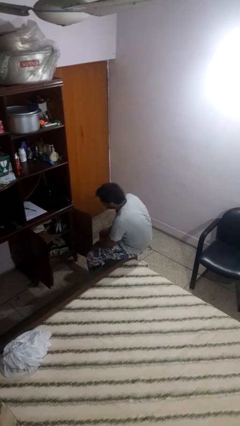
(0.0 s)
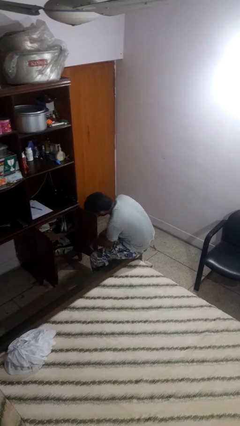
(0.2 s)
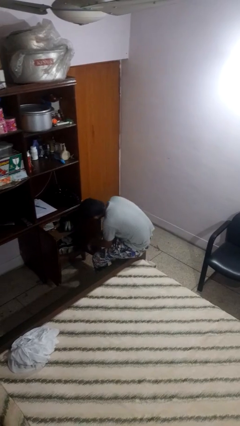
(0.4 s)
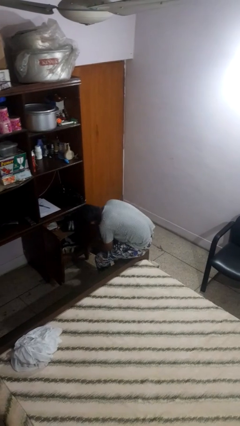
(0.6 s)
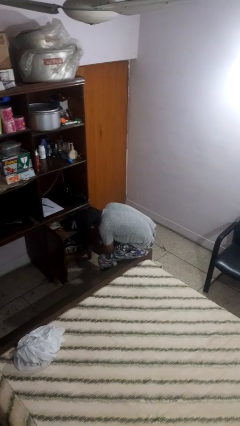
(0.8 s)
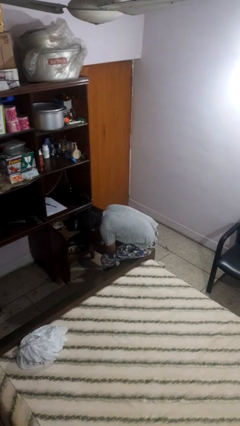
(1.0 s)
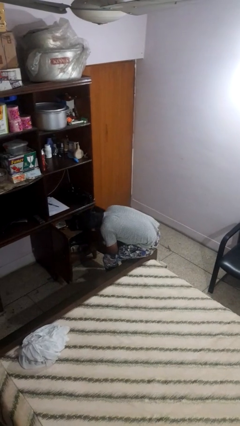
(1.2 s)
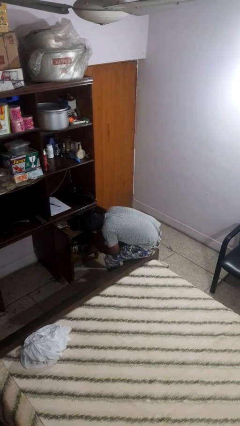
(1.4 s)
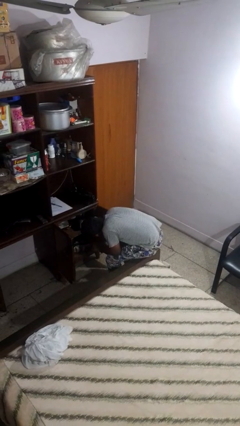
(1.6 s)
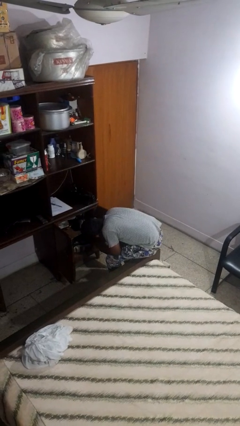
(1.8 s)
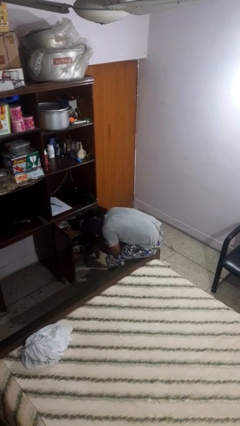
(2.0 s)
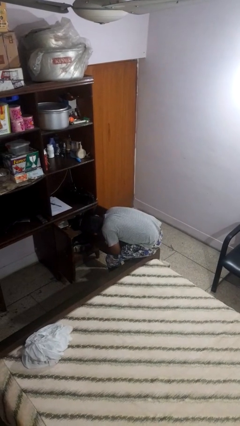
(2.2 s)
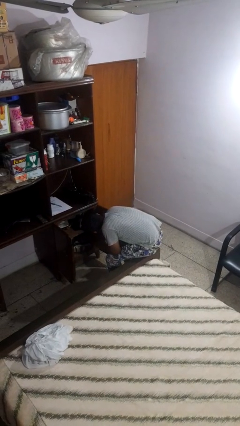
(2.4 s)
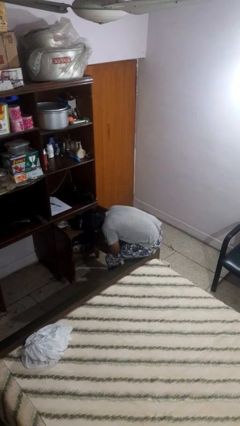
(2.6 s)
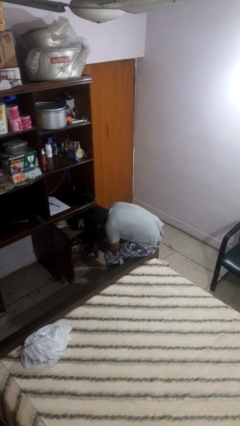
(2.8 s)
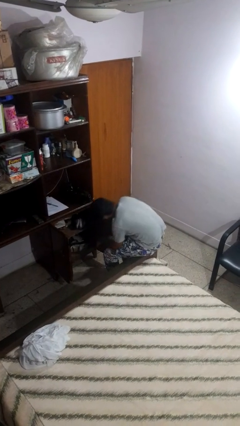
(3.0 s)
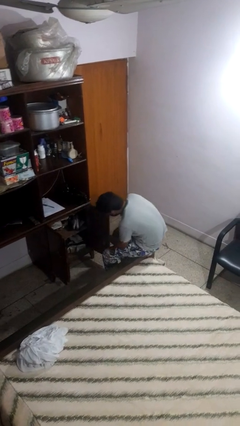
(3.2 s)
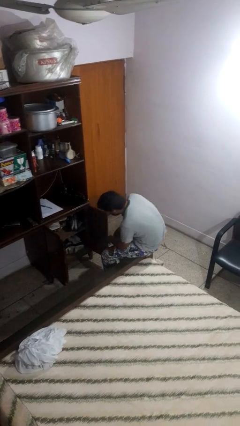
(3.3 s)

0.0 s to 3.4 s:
person searches in cabinet

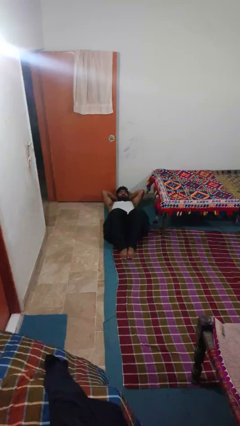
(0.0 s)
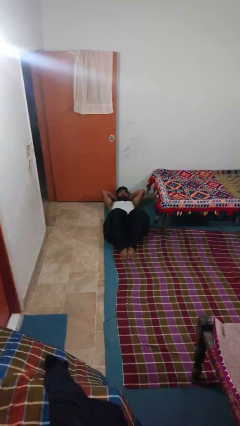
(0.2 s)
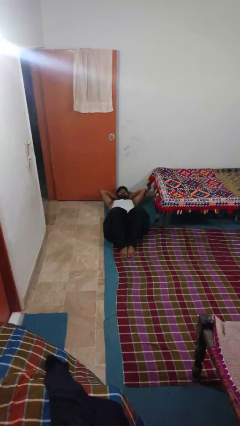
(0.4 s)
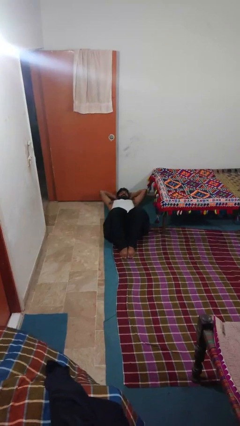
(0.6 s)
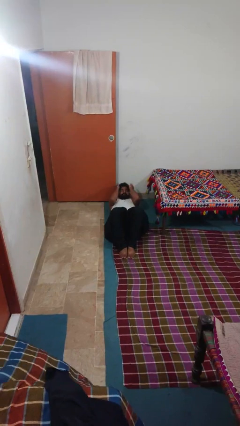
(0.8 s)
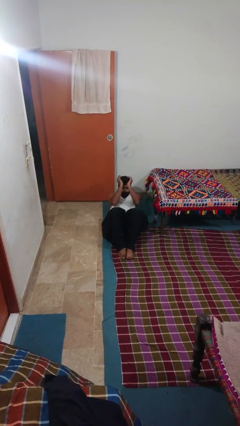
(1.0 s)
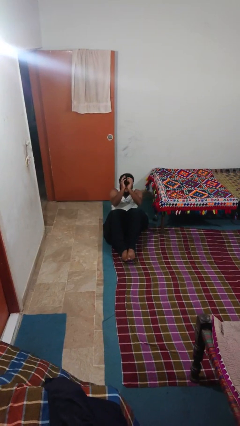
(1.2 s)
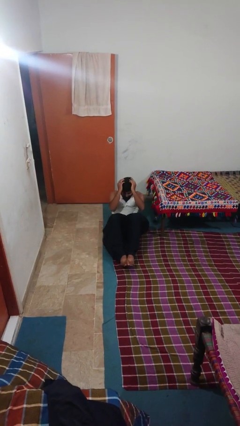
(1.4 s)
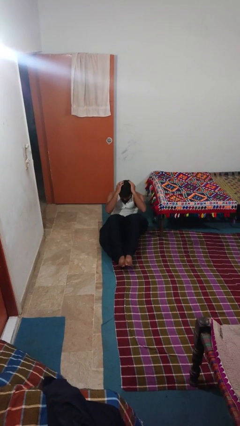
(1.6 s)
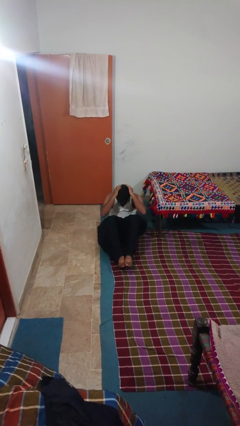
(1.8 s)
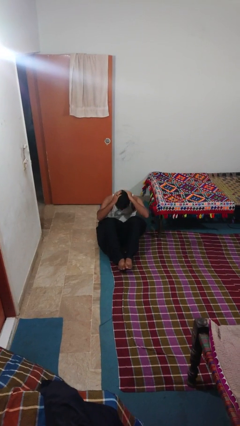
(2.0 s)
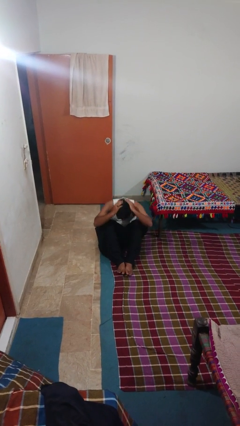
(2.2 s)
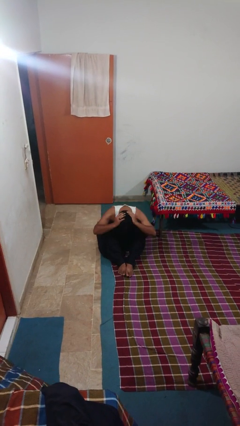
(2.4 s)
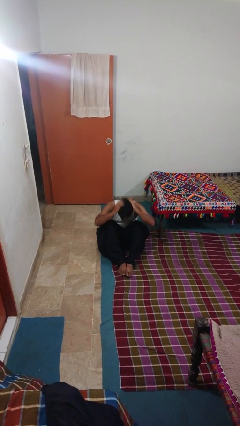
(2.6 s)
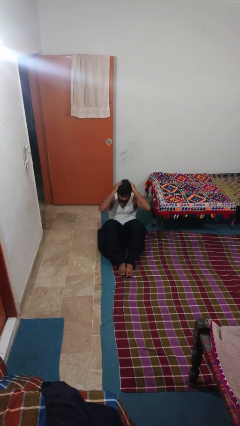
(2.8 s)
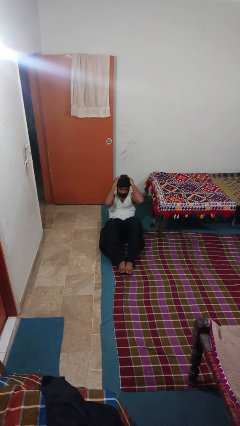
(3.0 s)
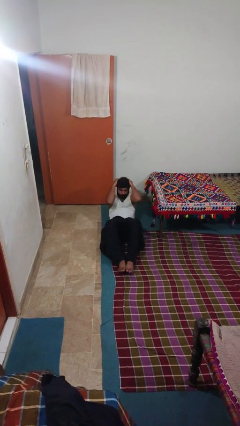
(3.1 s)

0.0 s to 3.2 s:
person exercises with situp

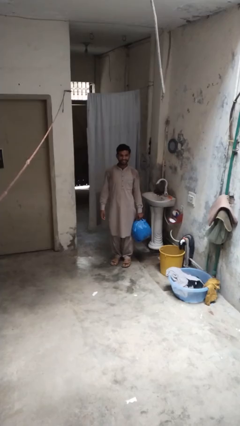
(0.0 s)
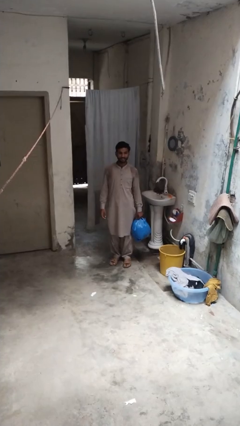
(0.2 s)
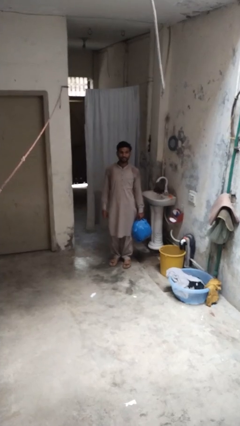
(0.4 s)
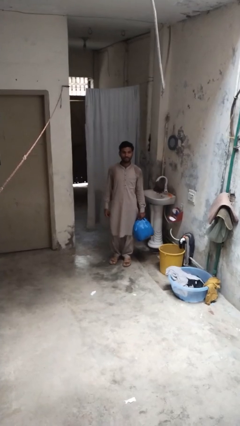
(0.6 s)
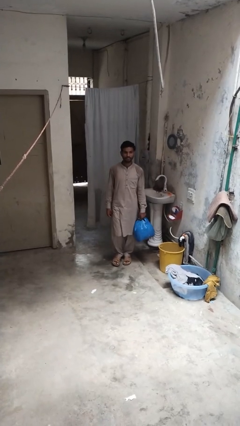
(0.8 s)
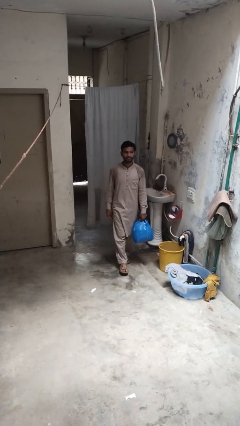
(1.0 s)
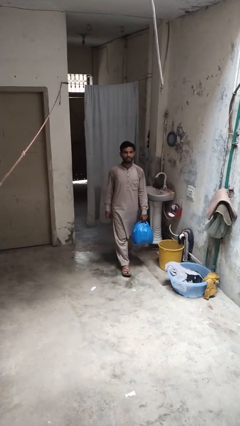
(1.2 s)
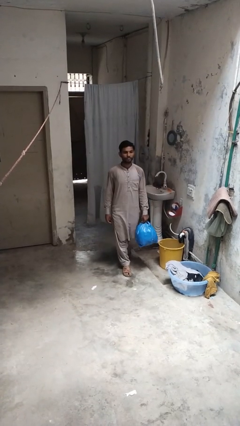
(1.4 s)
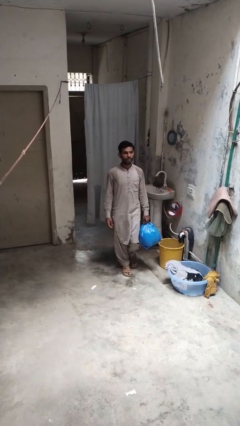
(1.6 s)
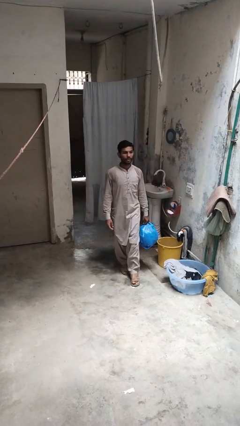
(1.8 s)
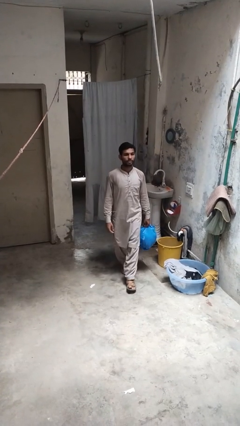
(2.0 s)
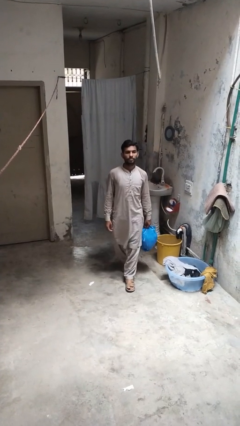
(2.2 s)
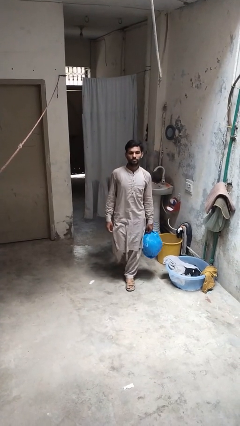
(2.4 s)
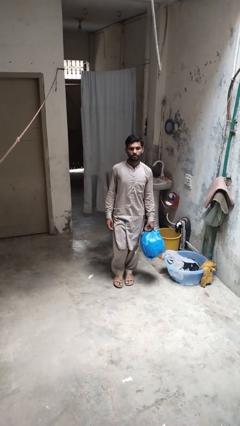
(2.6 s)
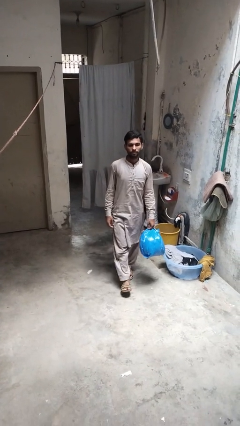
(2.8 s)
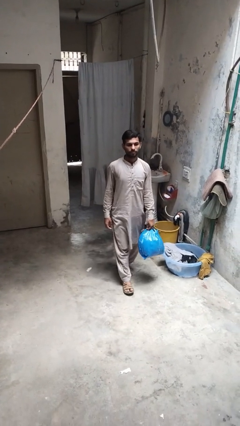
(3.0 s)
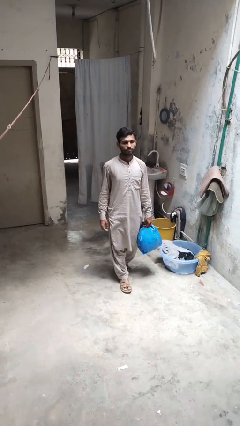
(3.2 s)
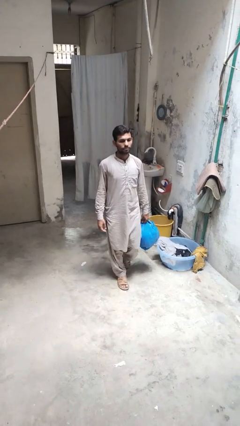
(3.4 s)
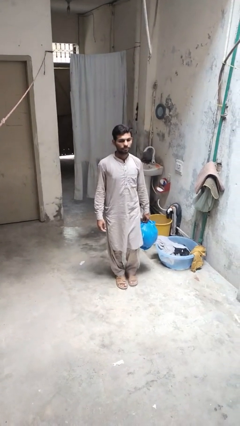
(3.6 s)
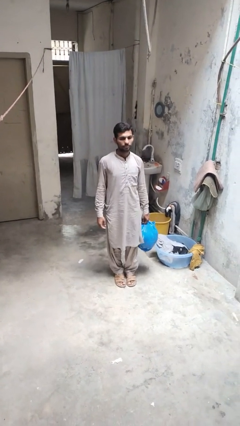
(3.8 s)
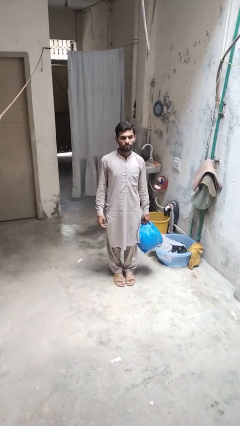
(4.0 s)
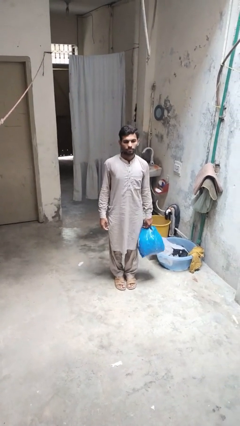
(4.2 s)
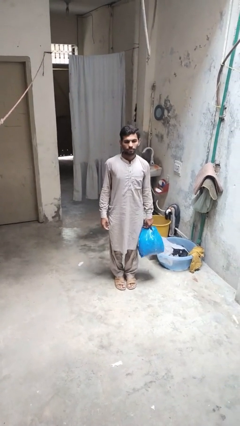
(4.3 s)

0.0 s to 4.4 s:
person carries groceries

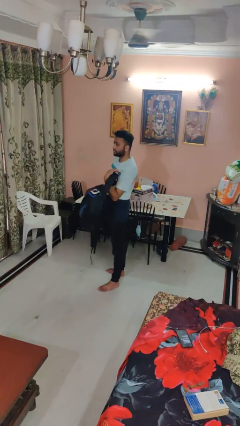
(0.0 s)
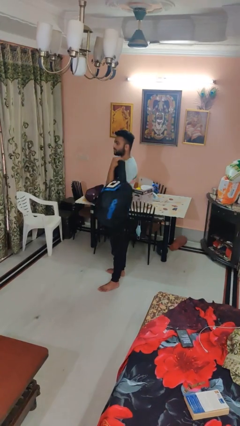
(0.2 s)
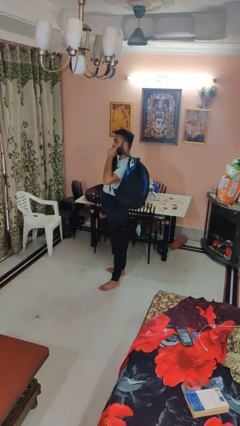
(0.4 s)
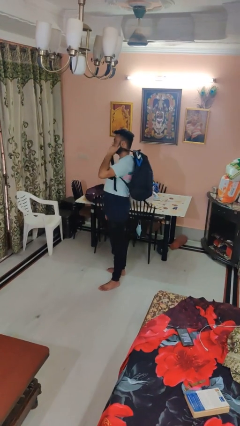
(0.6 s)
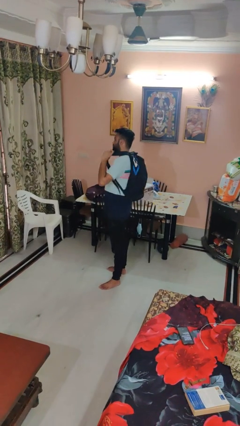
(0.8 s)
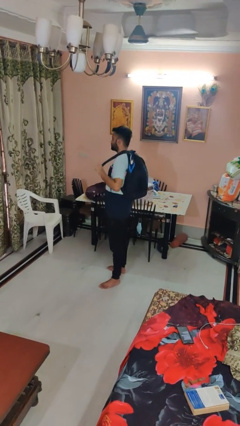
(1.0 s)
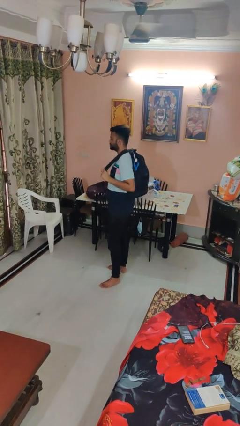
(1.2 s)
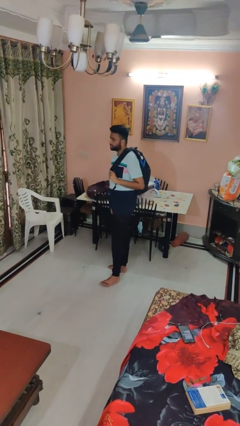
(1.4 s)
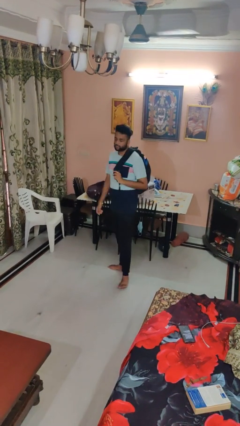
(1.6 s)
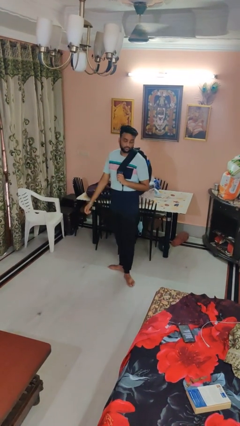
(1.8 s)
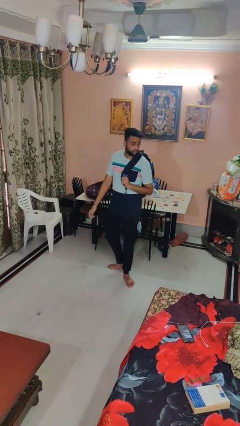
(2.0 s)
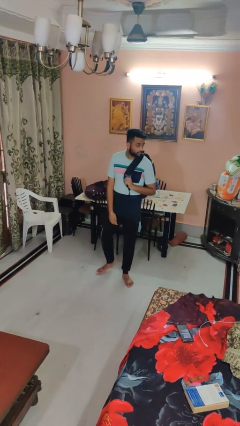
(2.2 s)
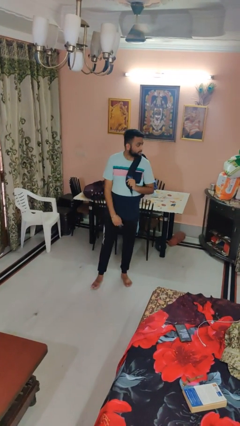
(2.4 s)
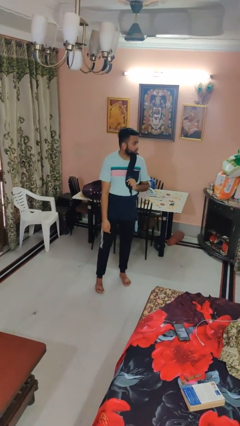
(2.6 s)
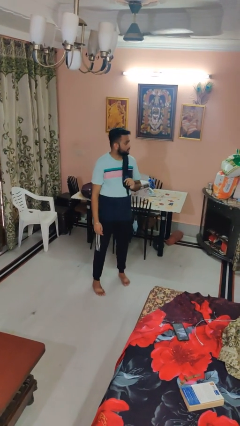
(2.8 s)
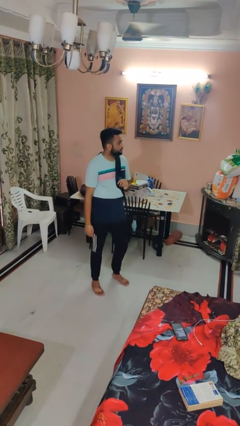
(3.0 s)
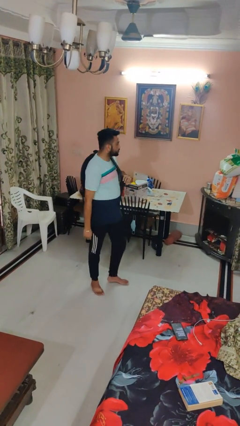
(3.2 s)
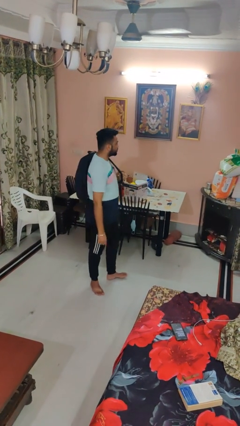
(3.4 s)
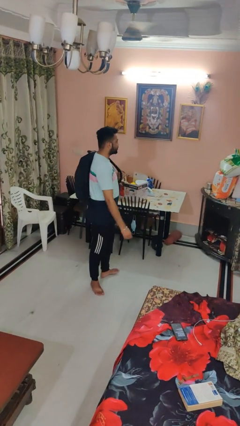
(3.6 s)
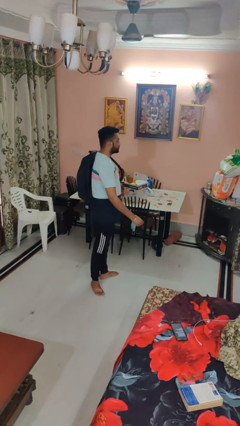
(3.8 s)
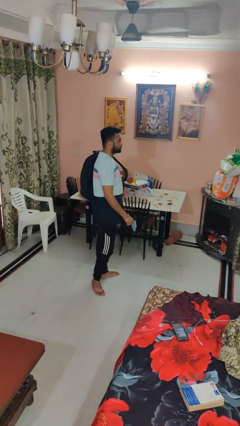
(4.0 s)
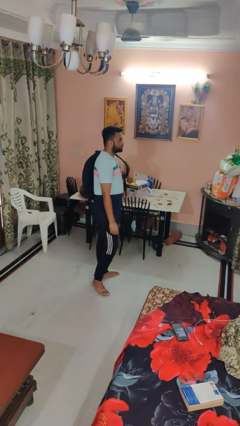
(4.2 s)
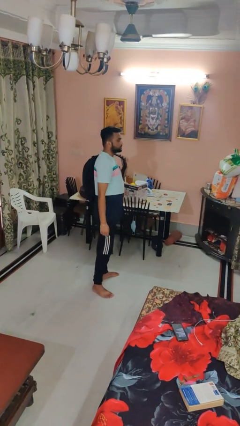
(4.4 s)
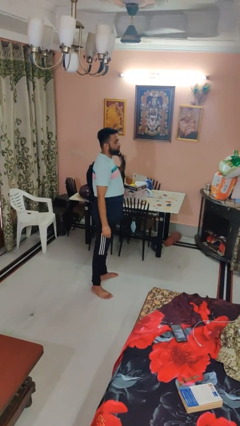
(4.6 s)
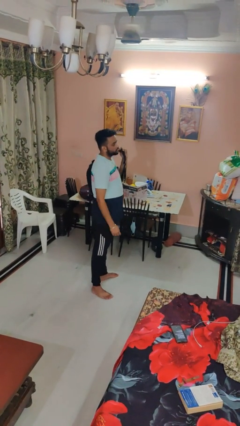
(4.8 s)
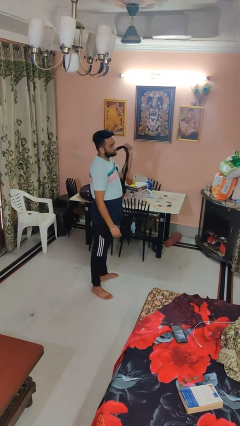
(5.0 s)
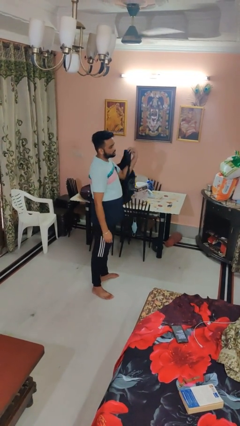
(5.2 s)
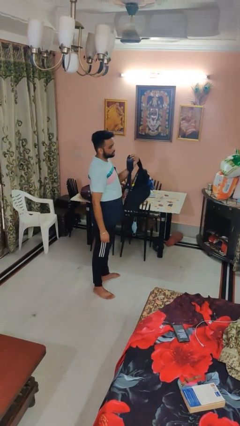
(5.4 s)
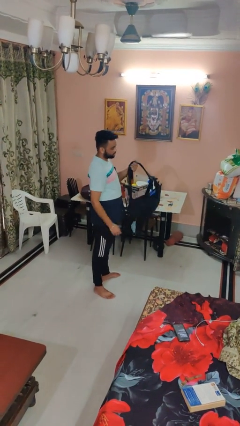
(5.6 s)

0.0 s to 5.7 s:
person puts on backpack

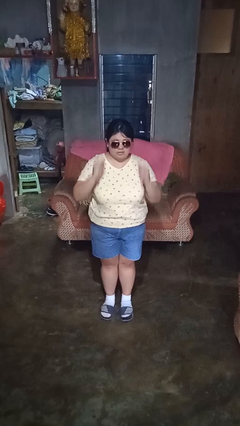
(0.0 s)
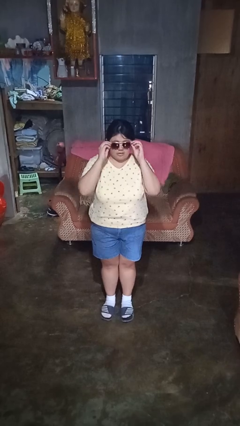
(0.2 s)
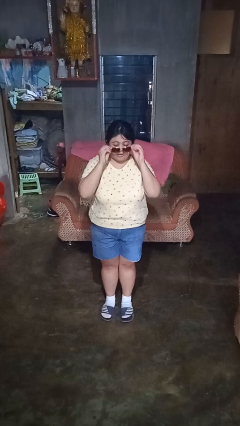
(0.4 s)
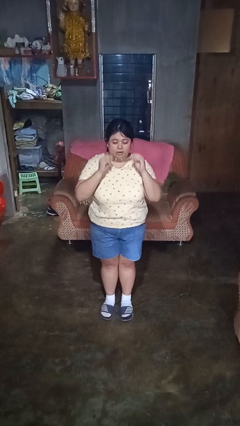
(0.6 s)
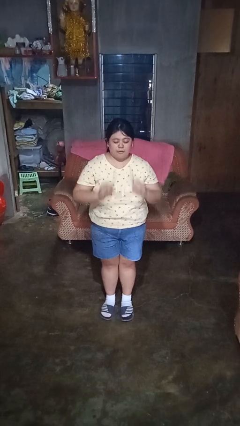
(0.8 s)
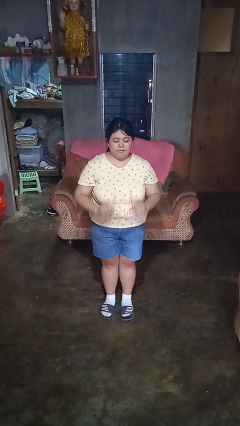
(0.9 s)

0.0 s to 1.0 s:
person takes off sunglasses
